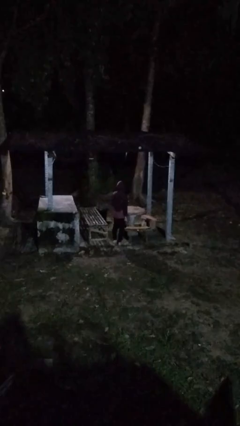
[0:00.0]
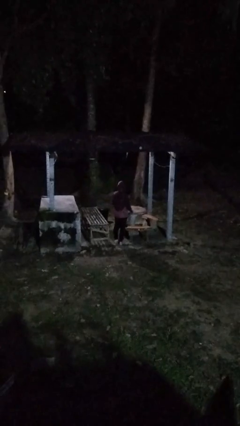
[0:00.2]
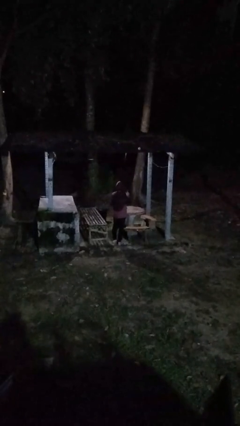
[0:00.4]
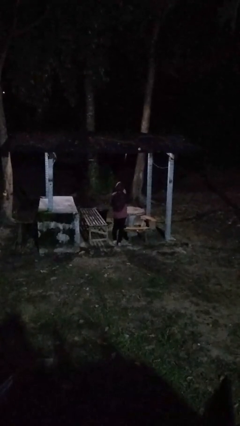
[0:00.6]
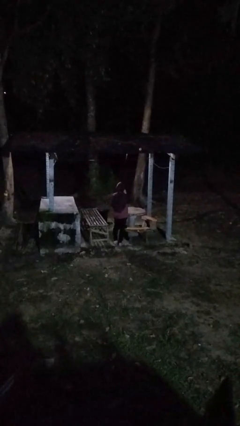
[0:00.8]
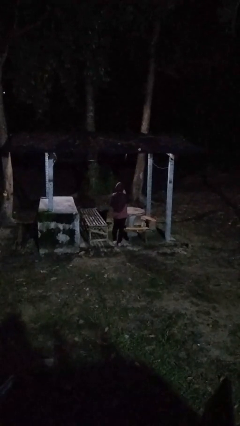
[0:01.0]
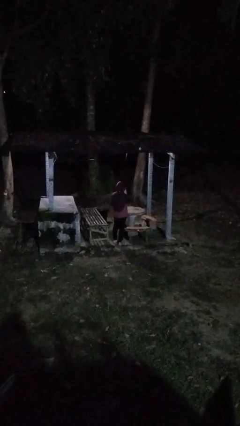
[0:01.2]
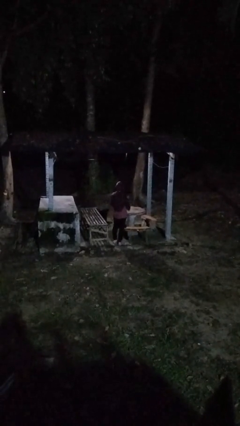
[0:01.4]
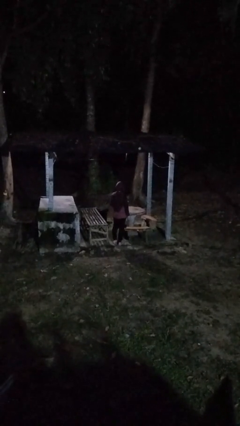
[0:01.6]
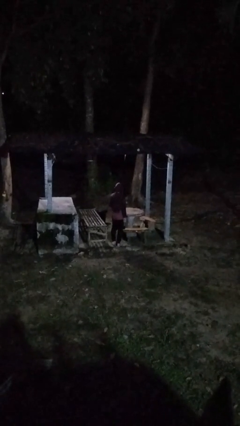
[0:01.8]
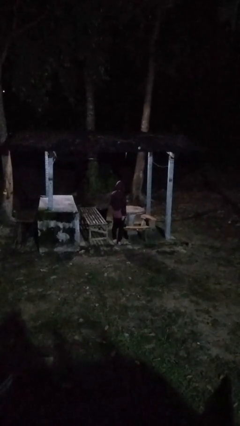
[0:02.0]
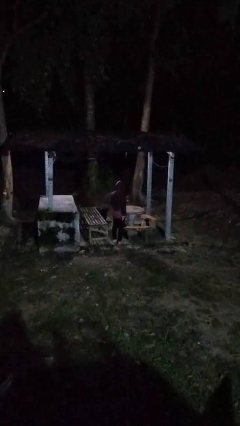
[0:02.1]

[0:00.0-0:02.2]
person gestures be quiet

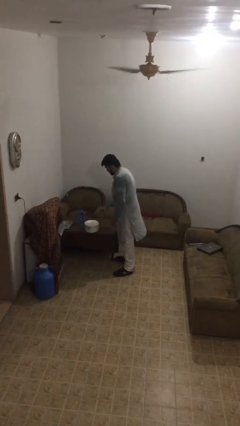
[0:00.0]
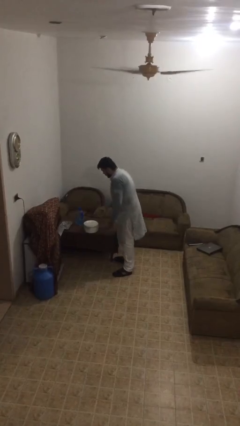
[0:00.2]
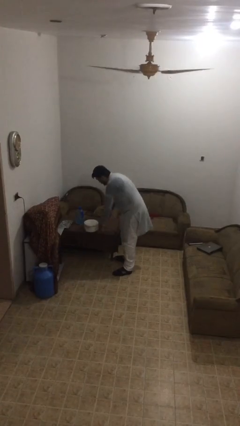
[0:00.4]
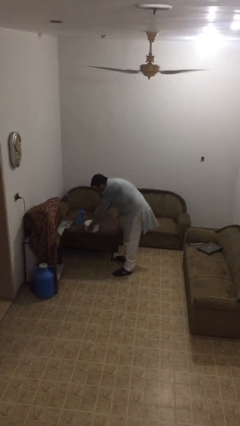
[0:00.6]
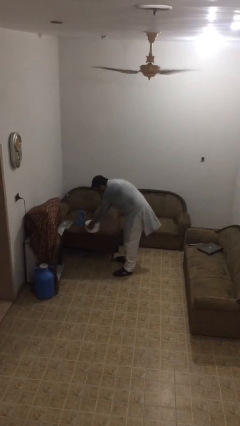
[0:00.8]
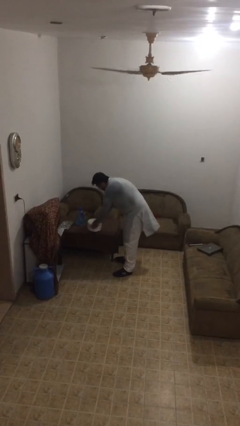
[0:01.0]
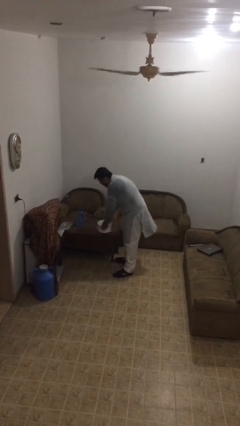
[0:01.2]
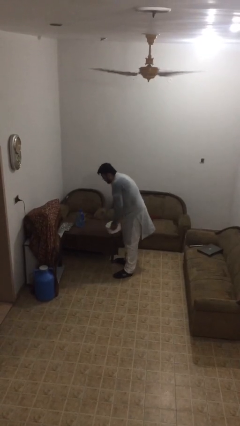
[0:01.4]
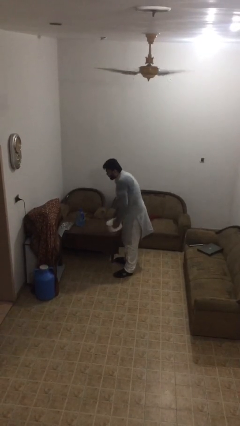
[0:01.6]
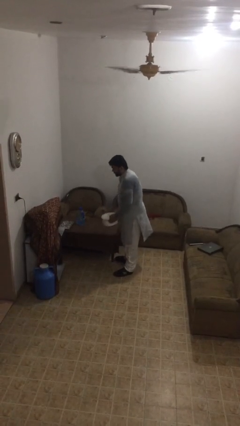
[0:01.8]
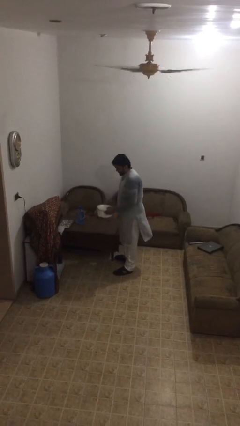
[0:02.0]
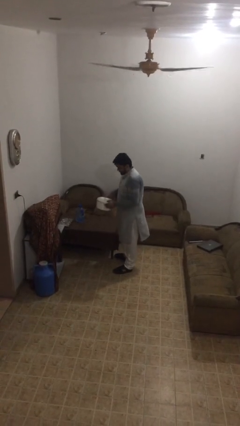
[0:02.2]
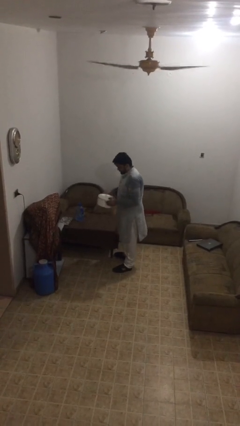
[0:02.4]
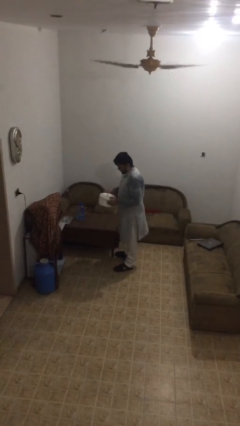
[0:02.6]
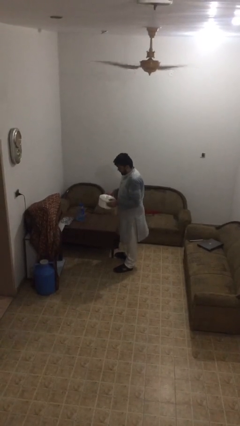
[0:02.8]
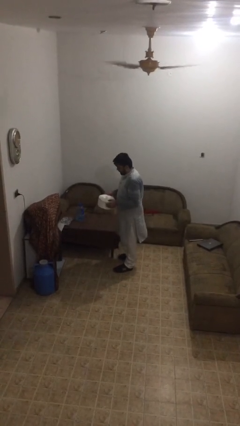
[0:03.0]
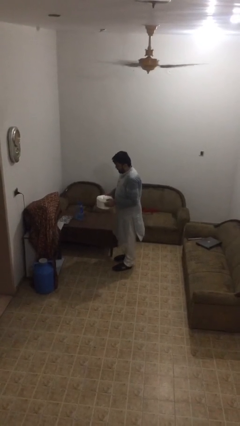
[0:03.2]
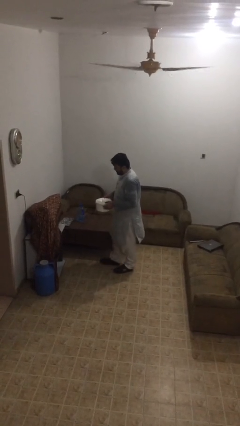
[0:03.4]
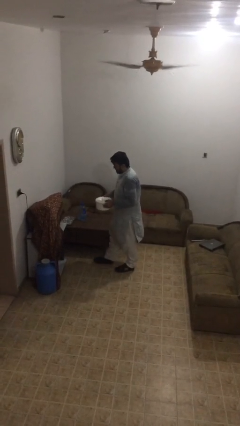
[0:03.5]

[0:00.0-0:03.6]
person picks up object from table

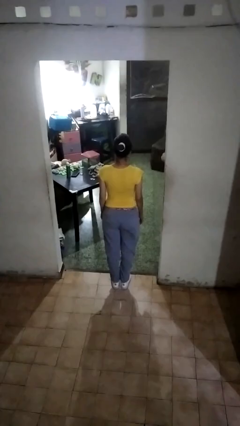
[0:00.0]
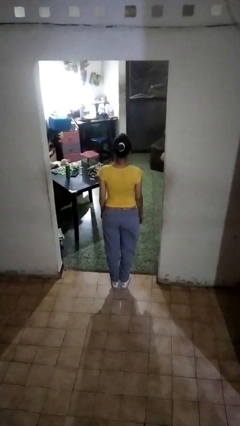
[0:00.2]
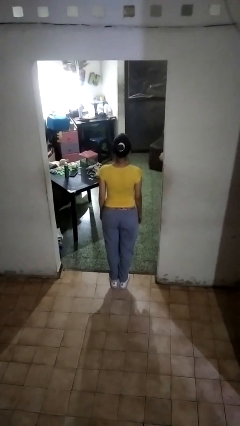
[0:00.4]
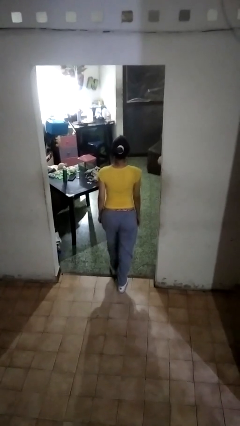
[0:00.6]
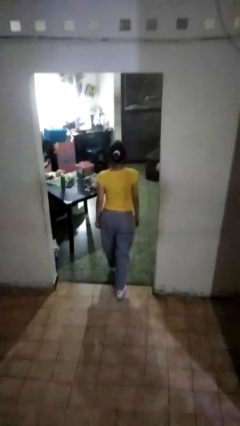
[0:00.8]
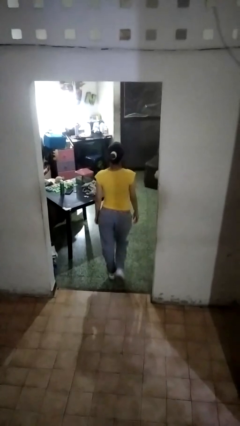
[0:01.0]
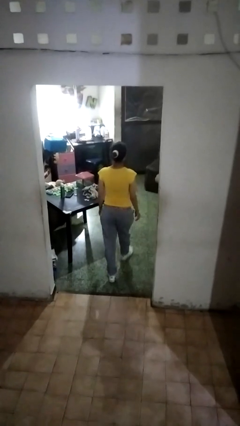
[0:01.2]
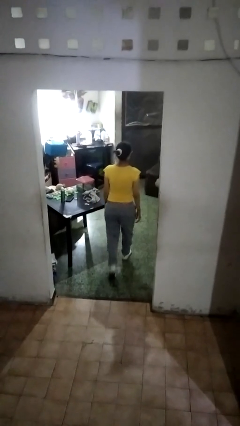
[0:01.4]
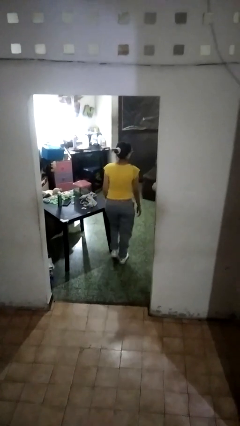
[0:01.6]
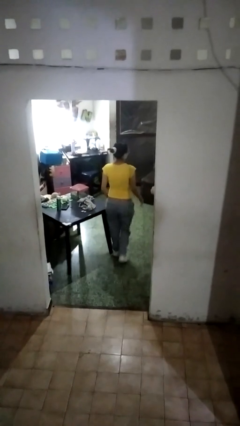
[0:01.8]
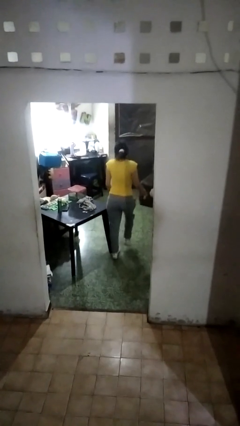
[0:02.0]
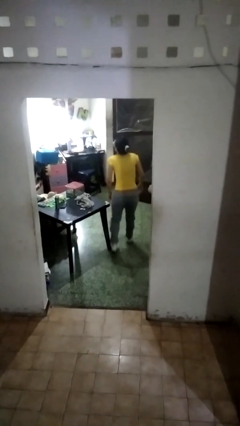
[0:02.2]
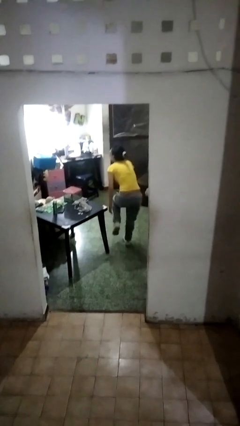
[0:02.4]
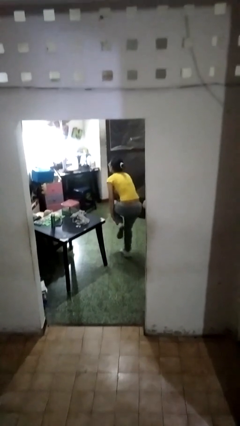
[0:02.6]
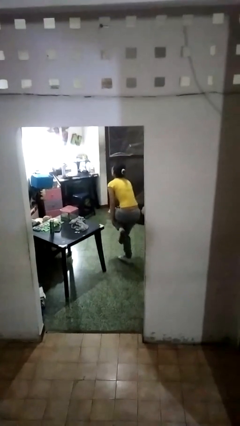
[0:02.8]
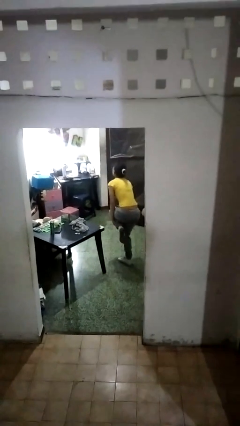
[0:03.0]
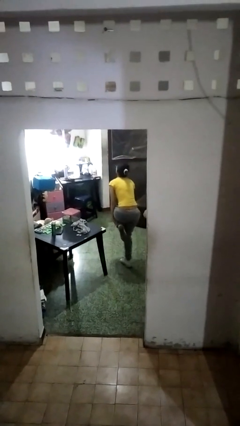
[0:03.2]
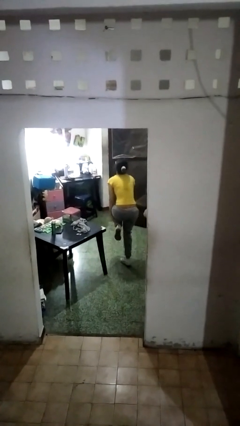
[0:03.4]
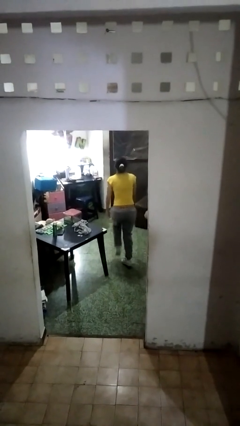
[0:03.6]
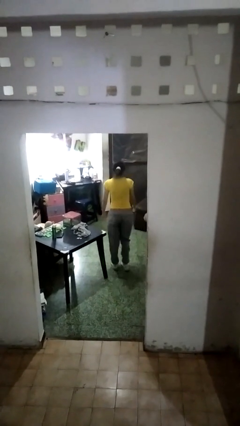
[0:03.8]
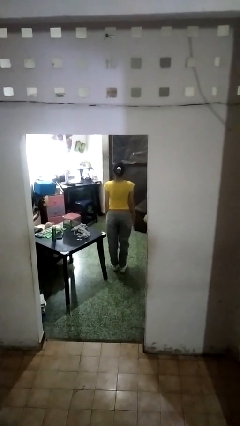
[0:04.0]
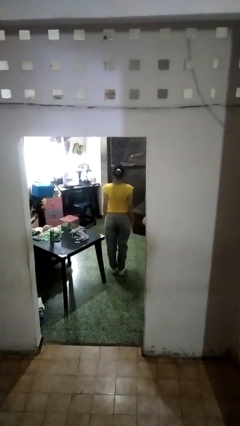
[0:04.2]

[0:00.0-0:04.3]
person bumps into table

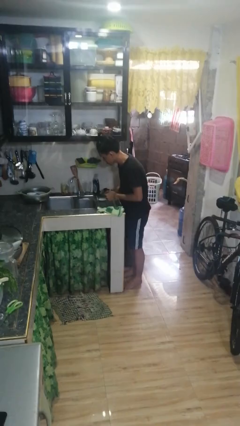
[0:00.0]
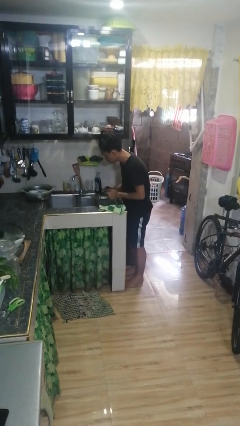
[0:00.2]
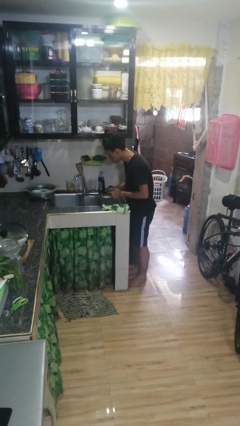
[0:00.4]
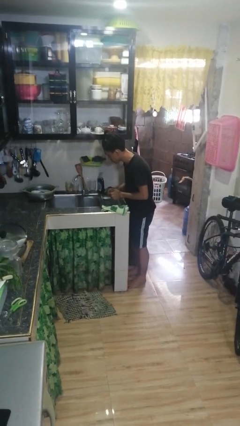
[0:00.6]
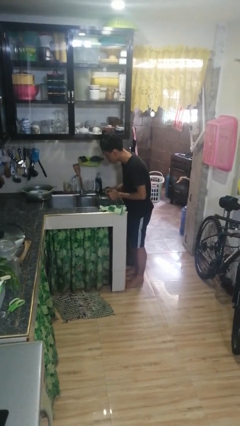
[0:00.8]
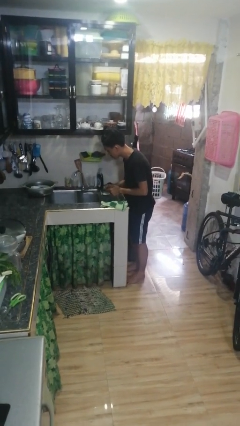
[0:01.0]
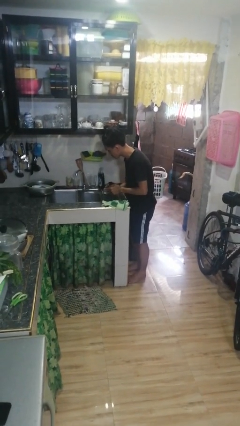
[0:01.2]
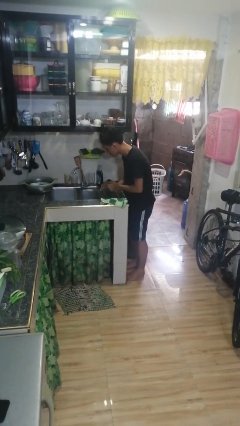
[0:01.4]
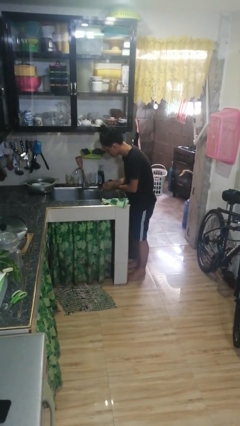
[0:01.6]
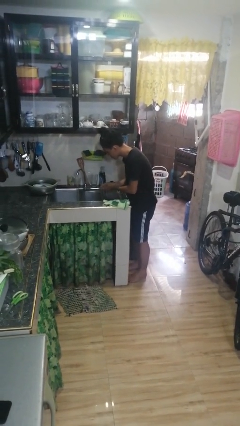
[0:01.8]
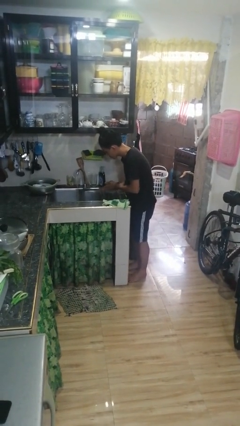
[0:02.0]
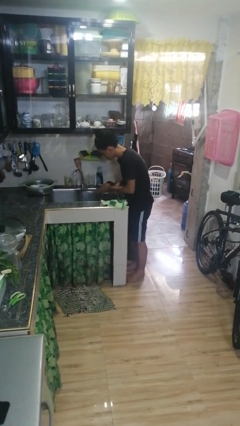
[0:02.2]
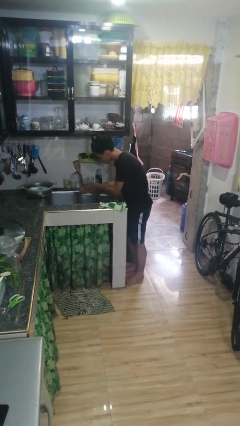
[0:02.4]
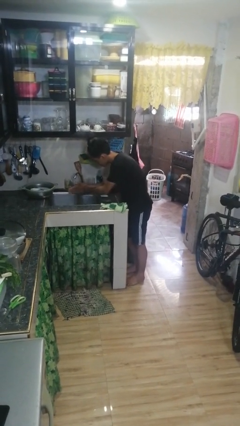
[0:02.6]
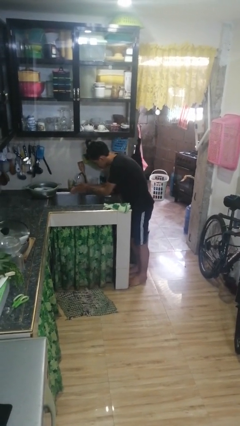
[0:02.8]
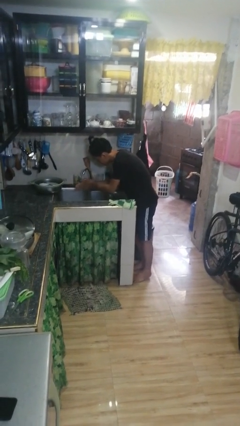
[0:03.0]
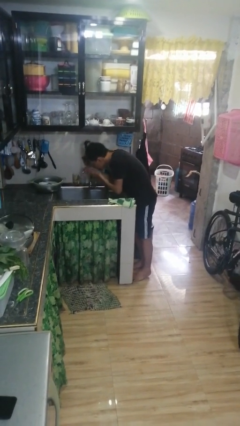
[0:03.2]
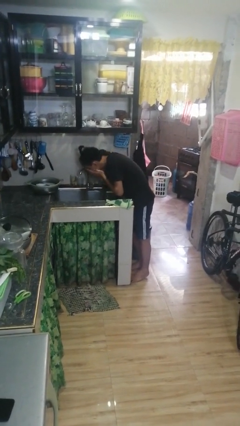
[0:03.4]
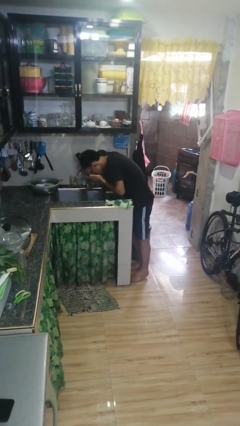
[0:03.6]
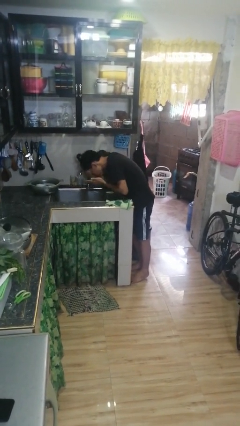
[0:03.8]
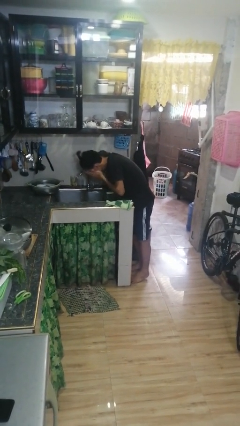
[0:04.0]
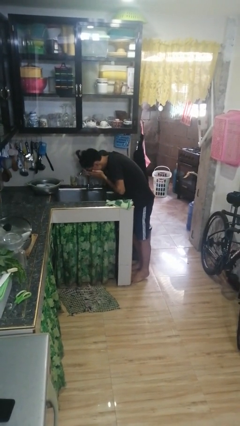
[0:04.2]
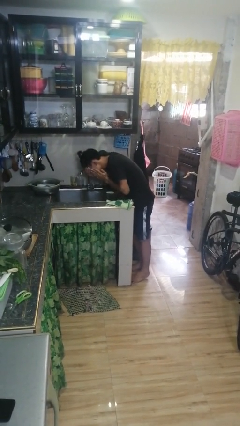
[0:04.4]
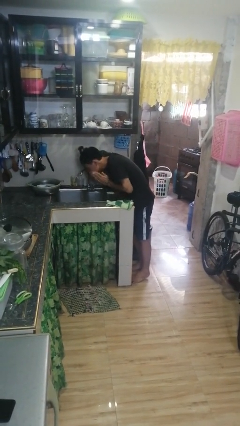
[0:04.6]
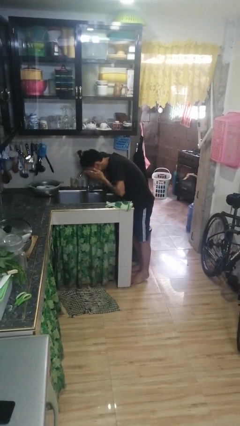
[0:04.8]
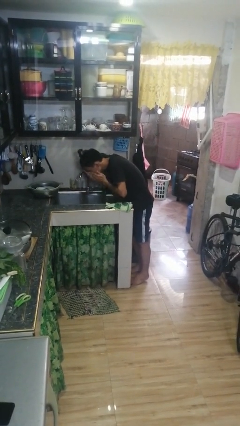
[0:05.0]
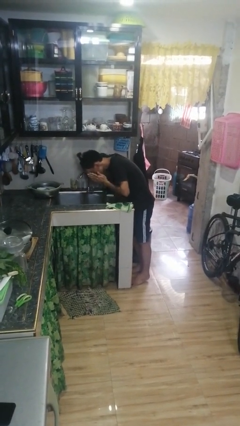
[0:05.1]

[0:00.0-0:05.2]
person washes face

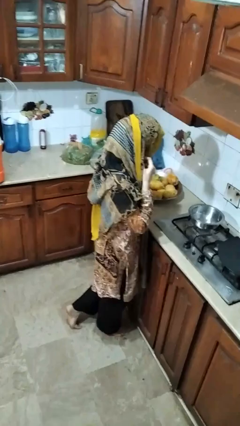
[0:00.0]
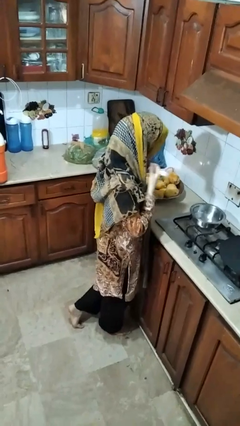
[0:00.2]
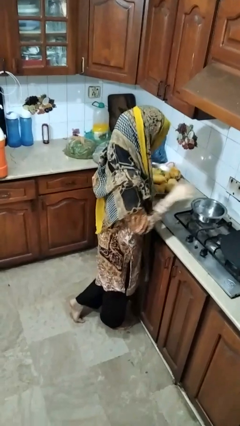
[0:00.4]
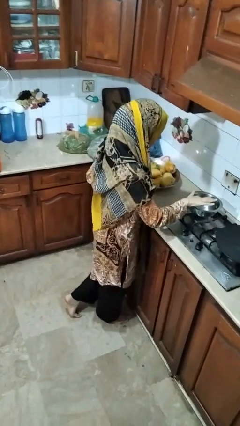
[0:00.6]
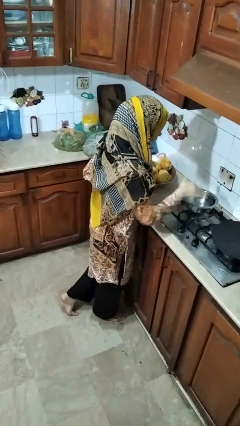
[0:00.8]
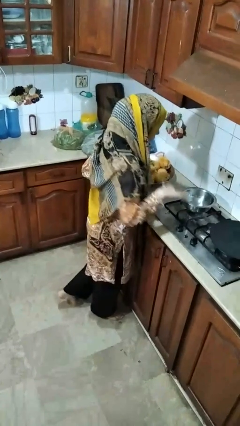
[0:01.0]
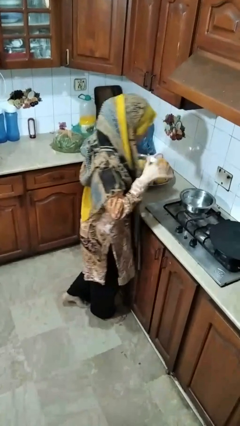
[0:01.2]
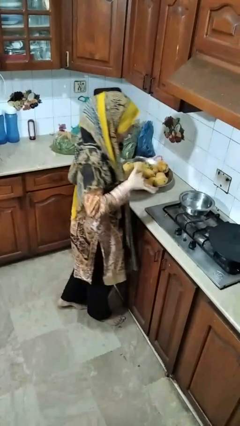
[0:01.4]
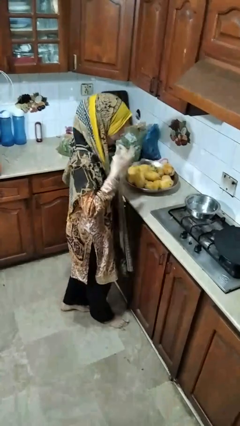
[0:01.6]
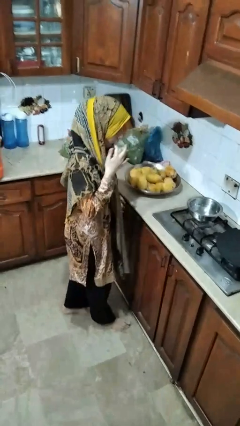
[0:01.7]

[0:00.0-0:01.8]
person burns hand

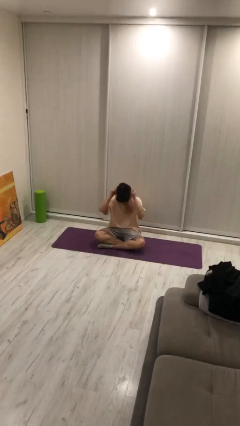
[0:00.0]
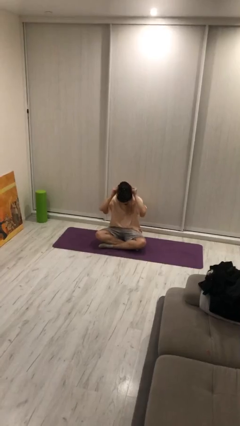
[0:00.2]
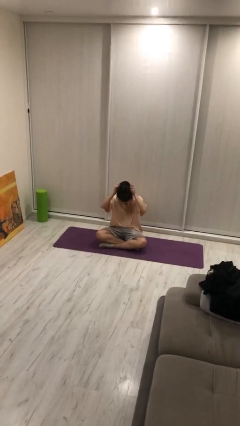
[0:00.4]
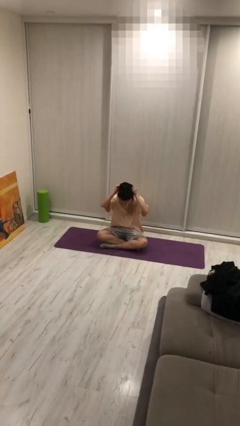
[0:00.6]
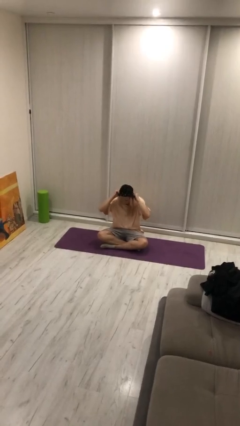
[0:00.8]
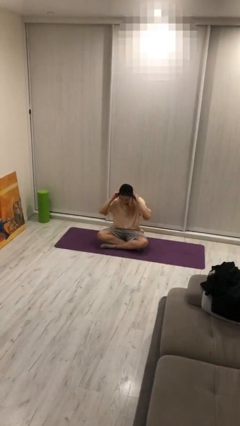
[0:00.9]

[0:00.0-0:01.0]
person puts on hat
